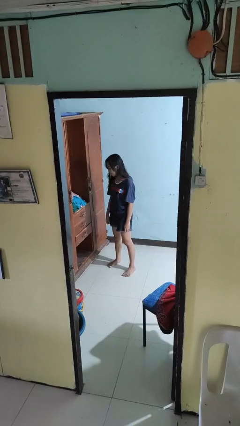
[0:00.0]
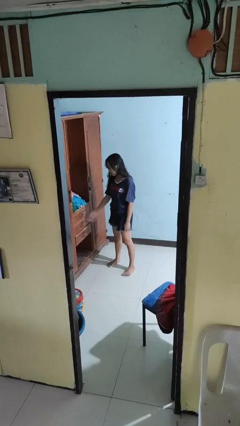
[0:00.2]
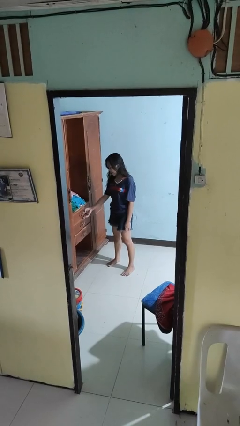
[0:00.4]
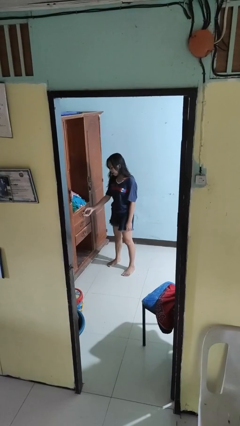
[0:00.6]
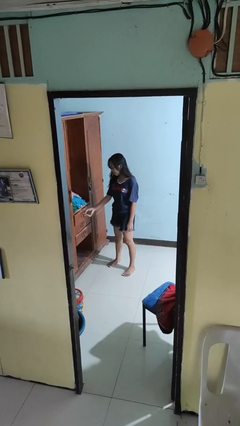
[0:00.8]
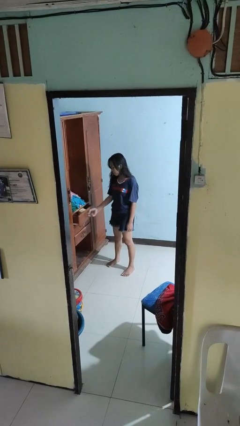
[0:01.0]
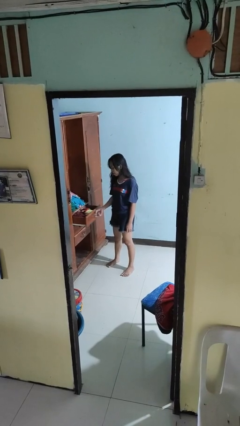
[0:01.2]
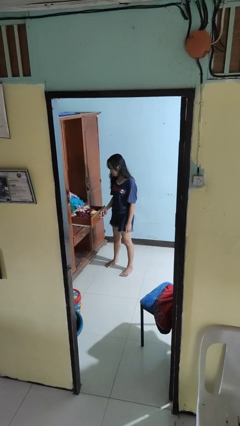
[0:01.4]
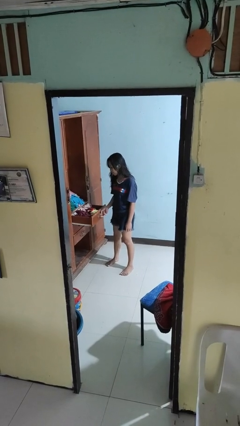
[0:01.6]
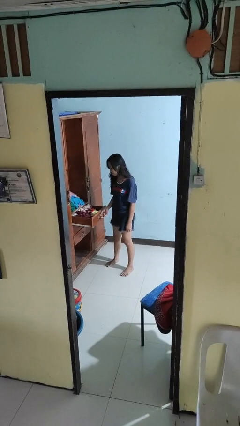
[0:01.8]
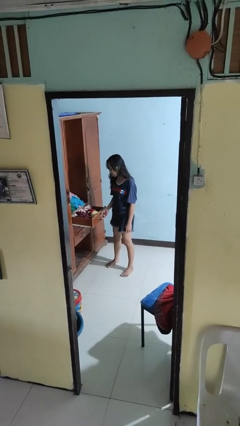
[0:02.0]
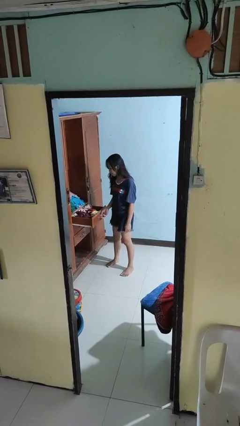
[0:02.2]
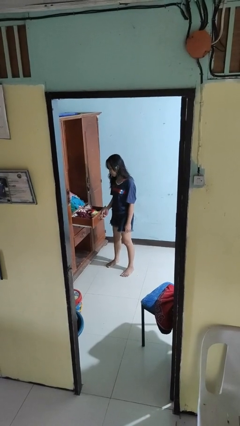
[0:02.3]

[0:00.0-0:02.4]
person opens dresser drawer

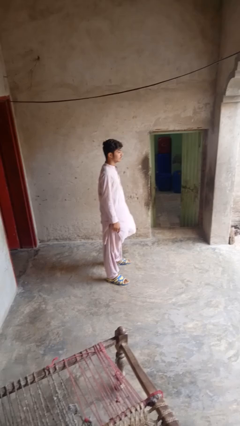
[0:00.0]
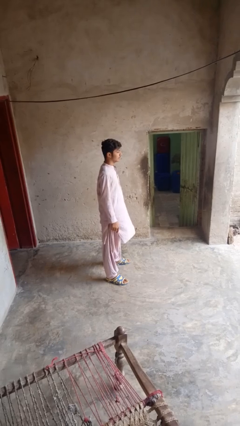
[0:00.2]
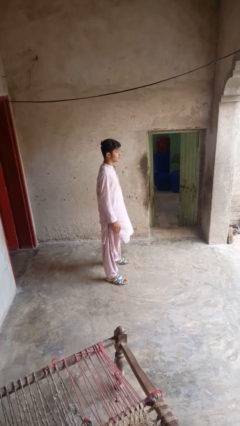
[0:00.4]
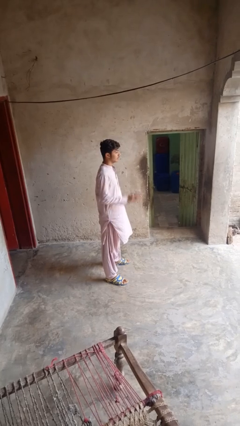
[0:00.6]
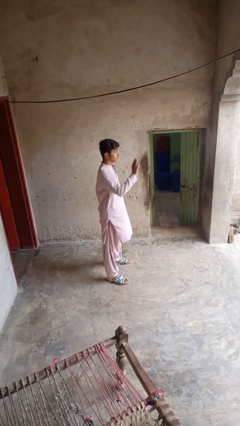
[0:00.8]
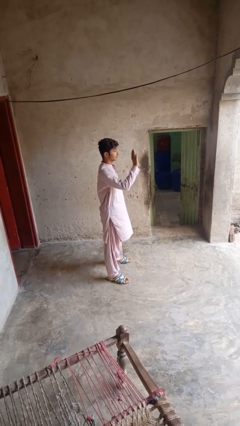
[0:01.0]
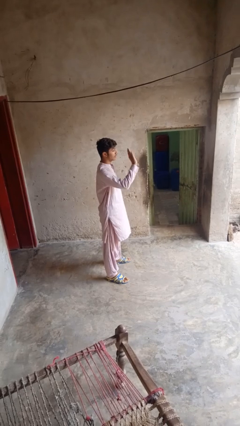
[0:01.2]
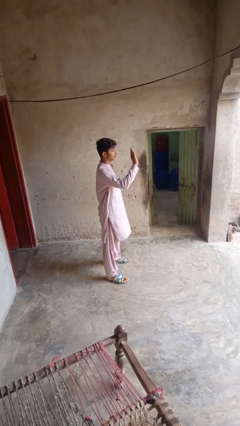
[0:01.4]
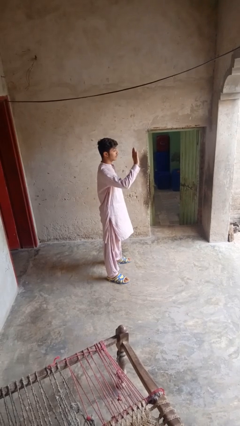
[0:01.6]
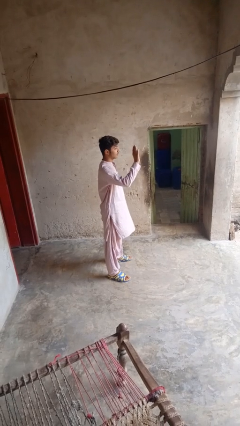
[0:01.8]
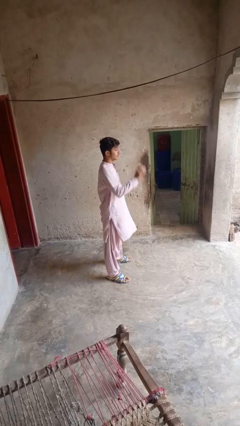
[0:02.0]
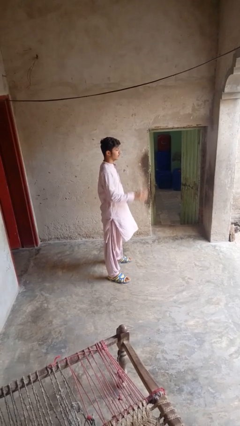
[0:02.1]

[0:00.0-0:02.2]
person waves at person

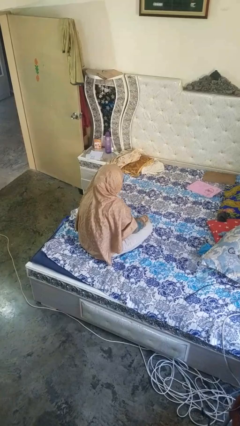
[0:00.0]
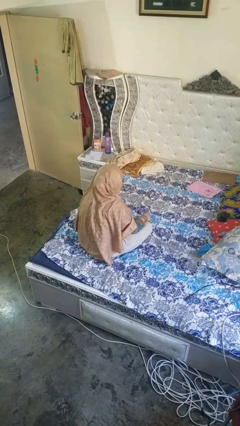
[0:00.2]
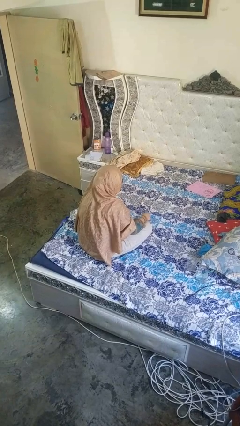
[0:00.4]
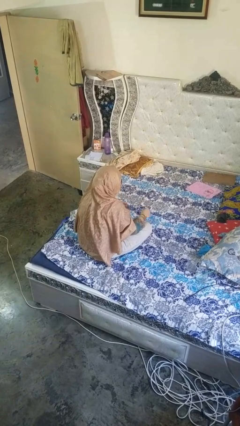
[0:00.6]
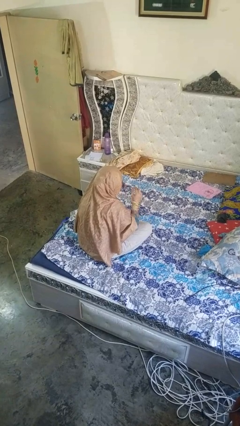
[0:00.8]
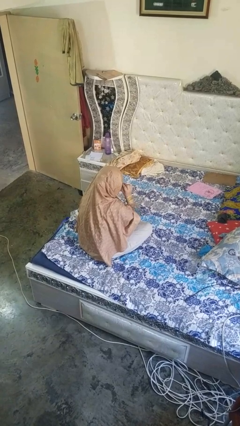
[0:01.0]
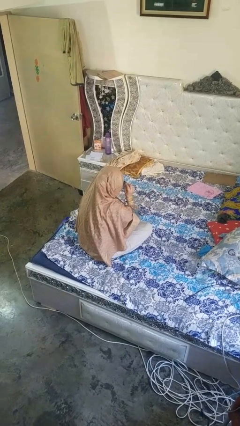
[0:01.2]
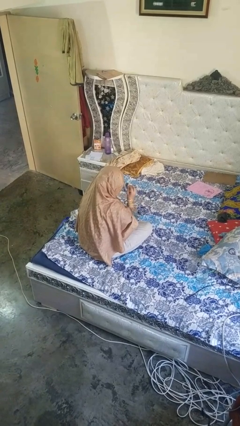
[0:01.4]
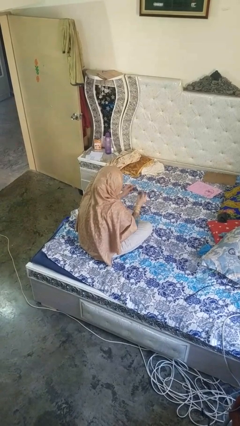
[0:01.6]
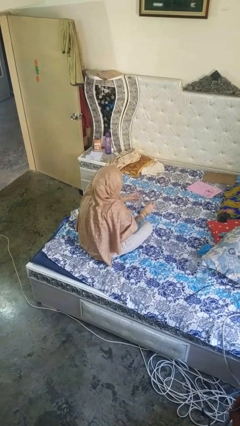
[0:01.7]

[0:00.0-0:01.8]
person takes off glasses

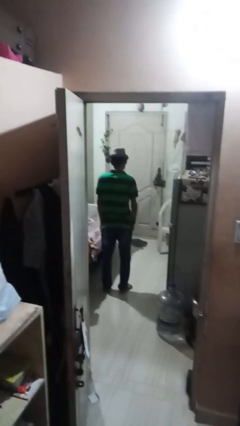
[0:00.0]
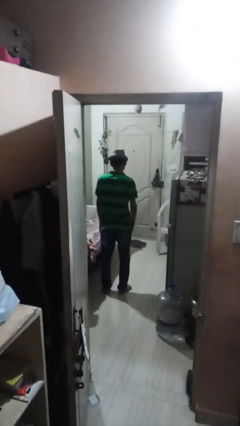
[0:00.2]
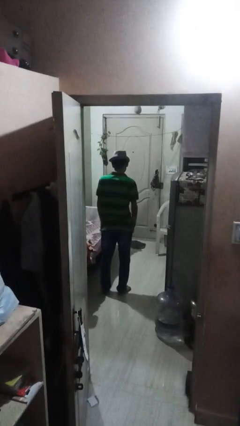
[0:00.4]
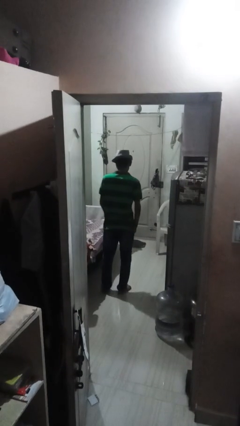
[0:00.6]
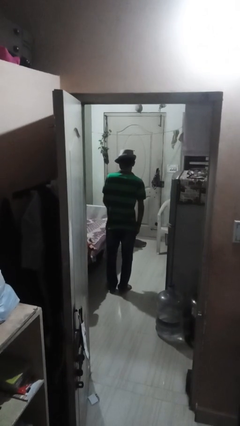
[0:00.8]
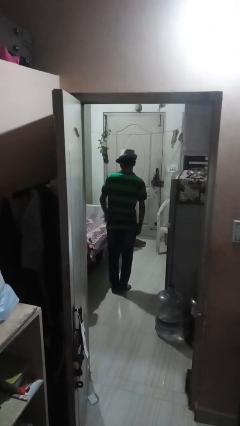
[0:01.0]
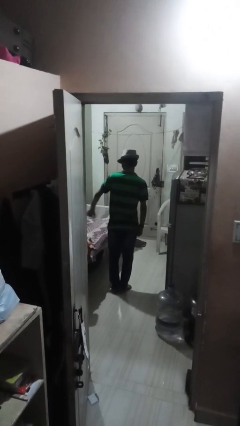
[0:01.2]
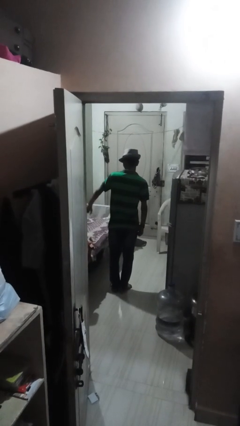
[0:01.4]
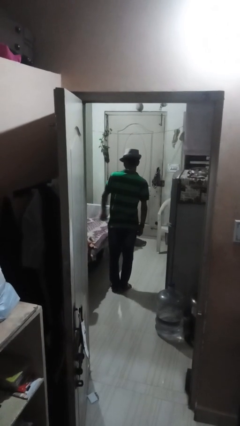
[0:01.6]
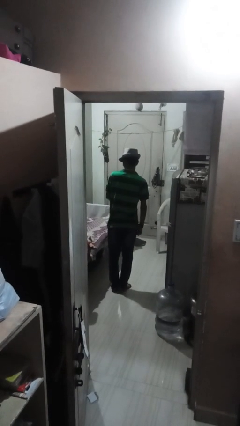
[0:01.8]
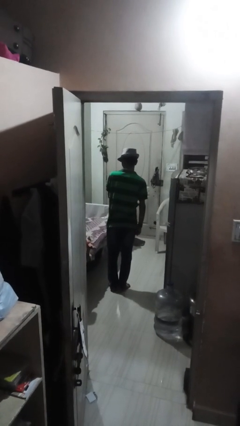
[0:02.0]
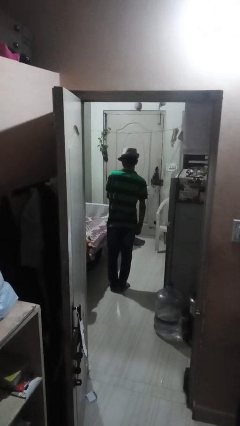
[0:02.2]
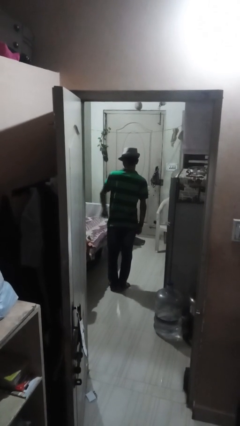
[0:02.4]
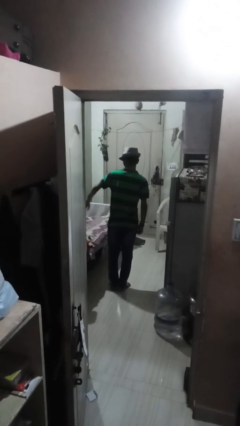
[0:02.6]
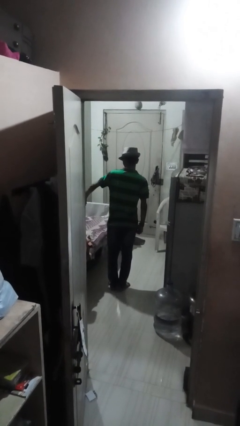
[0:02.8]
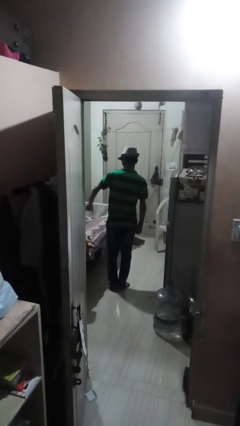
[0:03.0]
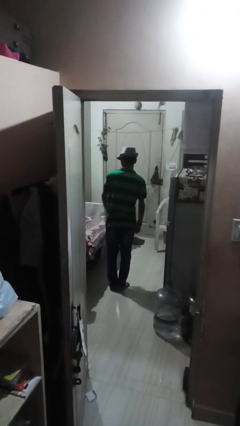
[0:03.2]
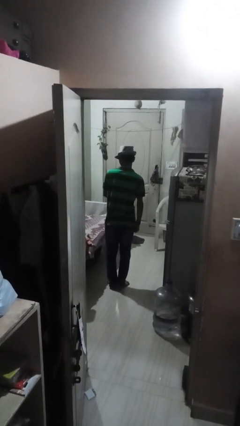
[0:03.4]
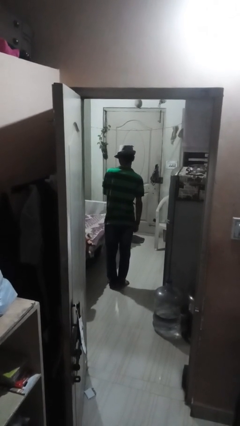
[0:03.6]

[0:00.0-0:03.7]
person gestures hang loose

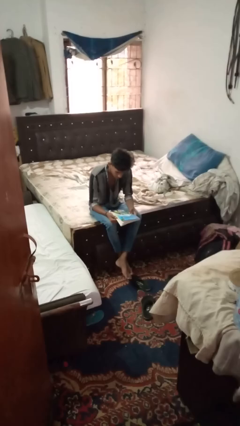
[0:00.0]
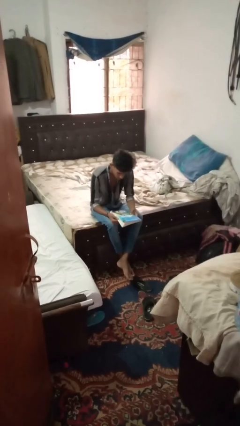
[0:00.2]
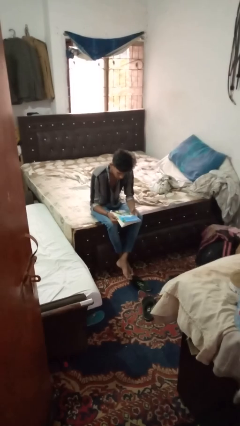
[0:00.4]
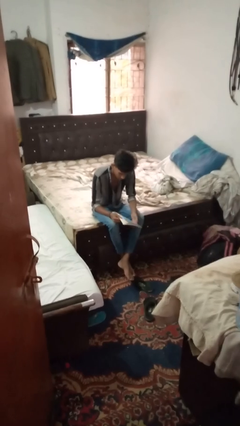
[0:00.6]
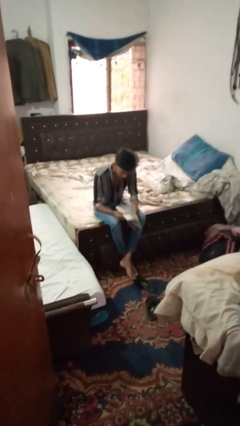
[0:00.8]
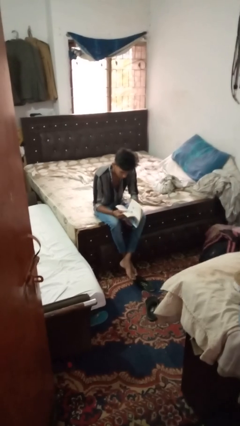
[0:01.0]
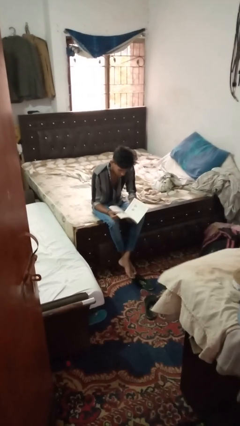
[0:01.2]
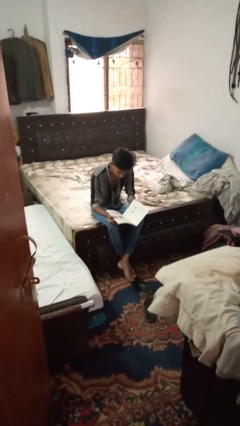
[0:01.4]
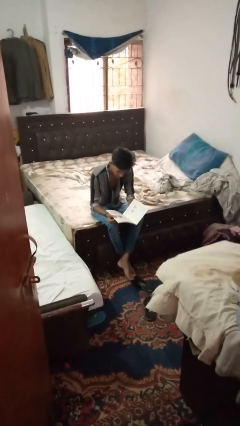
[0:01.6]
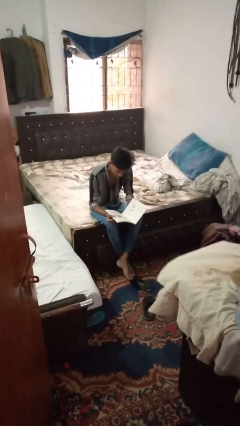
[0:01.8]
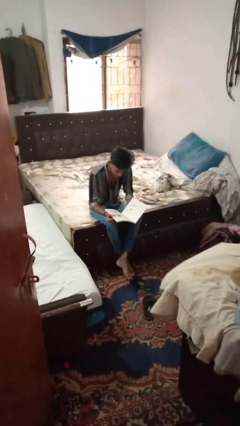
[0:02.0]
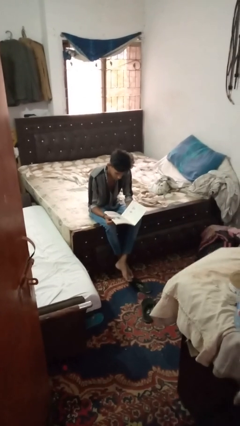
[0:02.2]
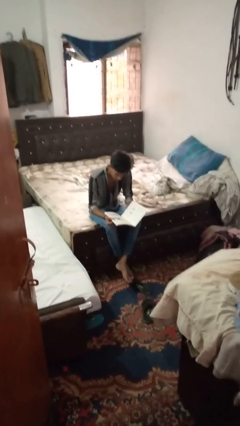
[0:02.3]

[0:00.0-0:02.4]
person reads book

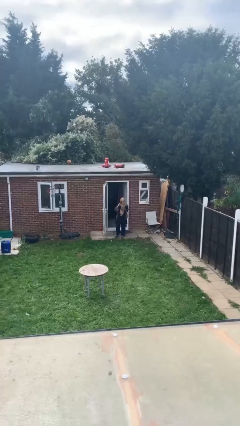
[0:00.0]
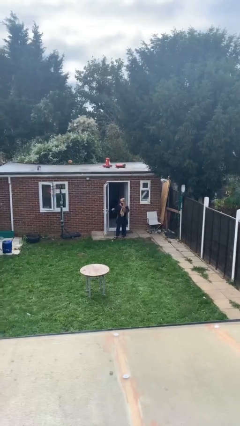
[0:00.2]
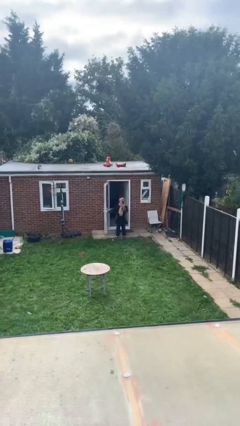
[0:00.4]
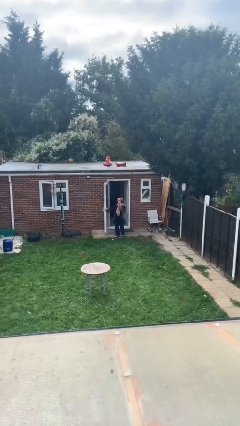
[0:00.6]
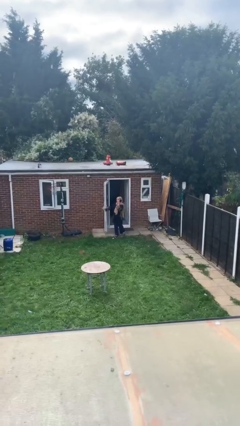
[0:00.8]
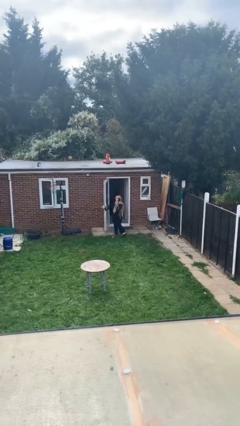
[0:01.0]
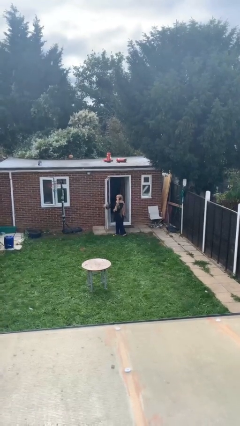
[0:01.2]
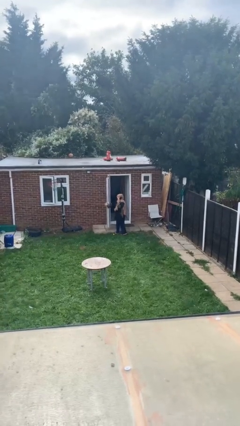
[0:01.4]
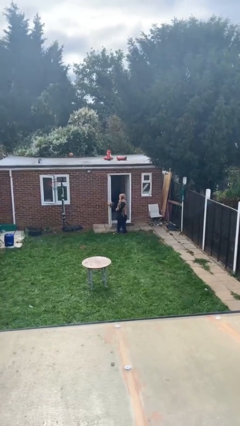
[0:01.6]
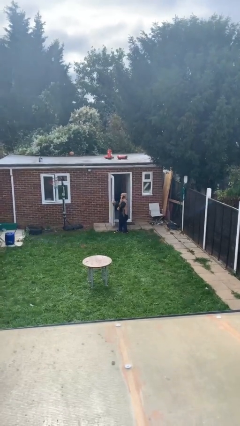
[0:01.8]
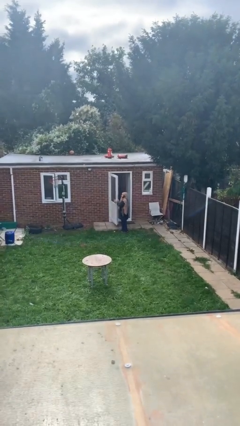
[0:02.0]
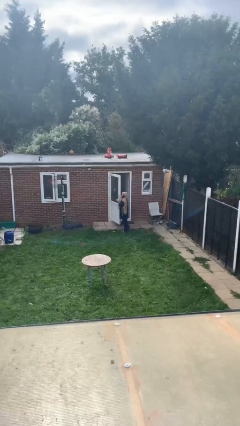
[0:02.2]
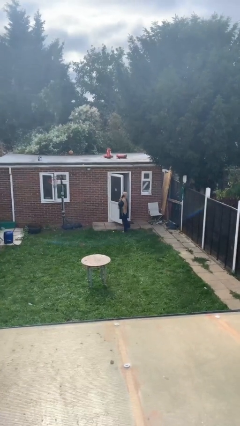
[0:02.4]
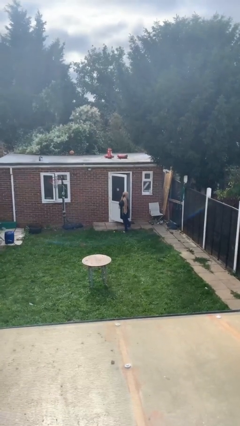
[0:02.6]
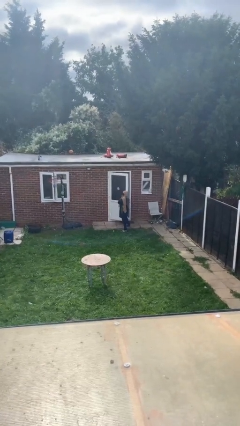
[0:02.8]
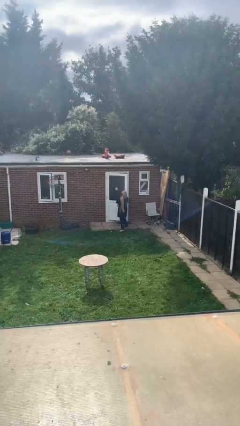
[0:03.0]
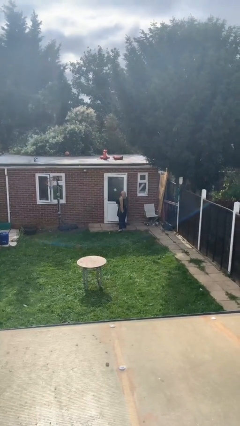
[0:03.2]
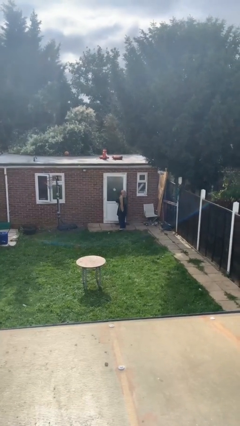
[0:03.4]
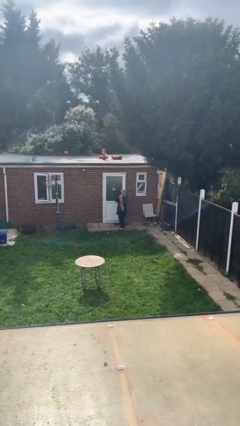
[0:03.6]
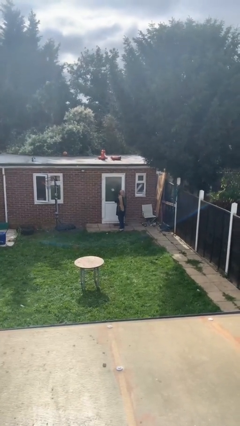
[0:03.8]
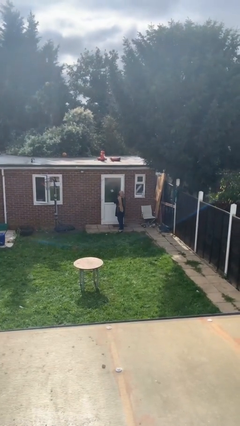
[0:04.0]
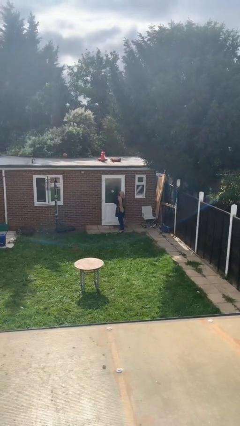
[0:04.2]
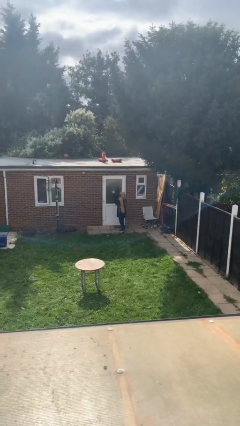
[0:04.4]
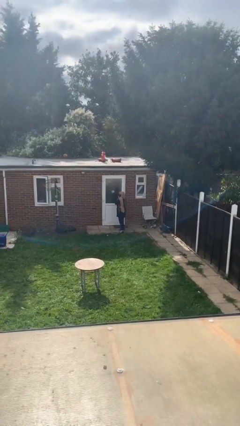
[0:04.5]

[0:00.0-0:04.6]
person closes facility door

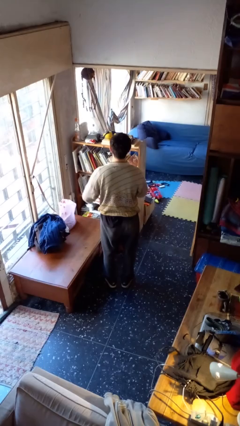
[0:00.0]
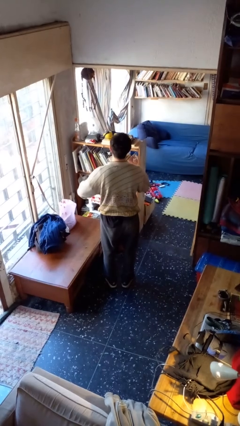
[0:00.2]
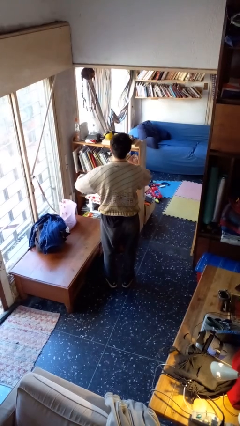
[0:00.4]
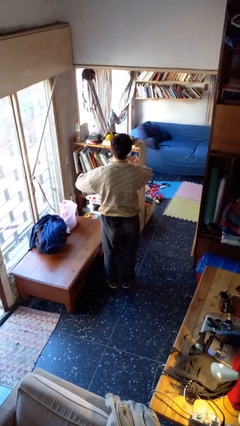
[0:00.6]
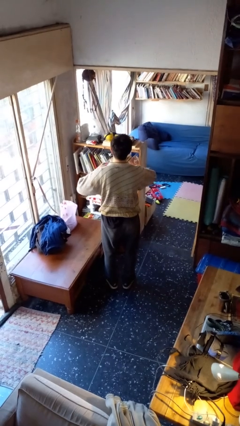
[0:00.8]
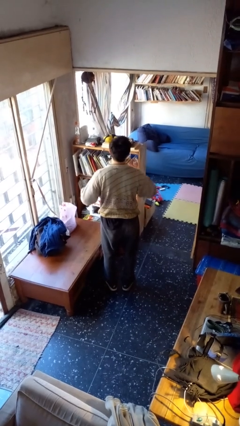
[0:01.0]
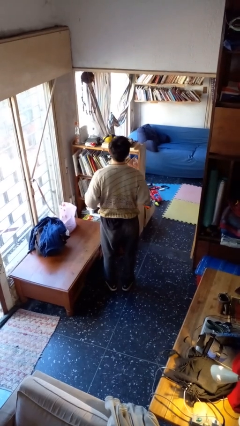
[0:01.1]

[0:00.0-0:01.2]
person takes off ring
